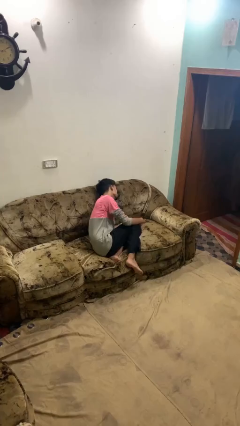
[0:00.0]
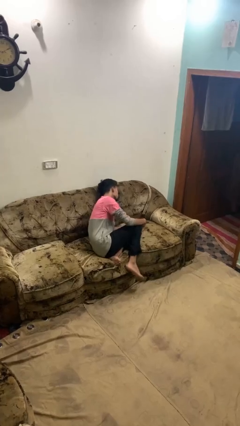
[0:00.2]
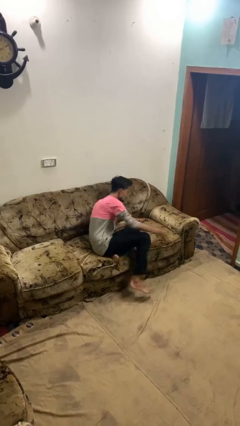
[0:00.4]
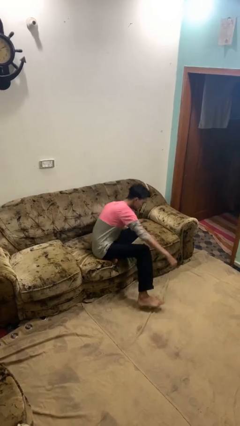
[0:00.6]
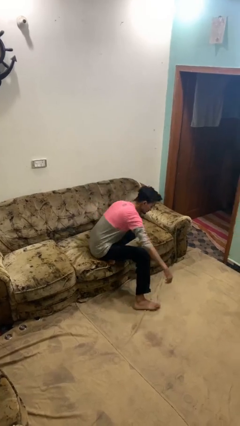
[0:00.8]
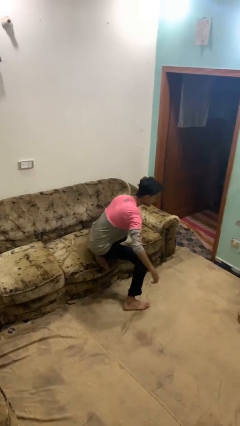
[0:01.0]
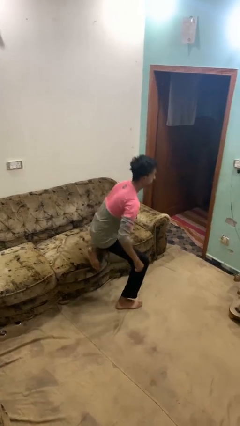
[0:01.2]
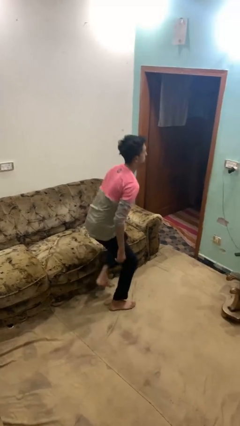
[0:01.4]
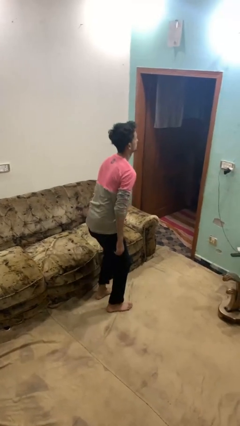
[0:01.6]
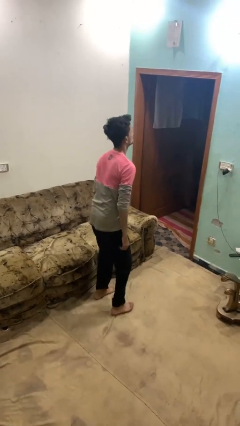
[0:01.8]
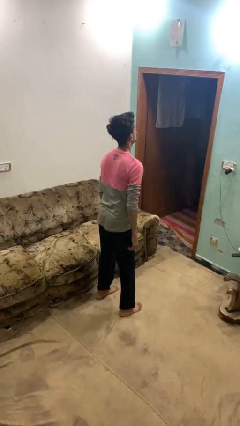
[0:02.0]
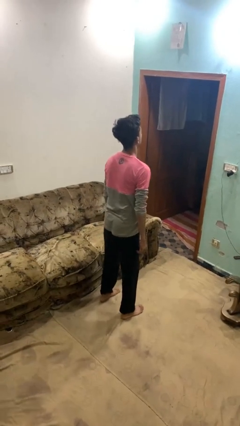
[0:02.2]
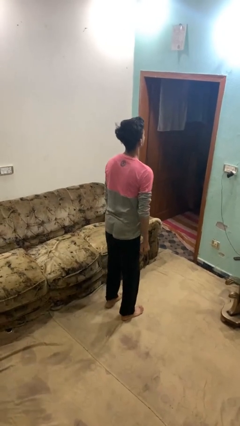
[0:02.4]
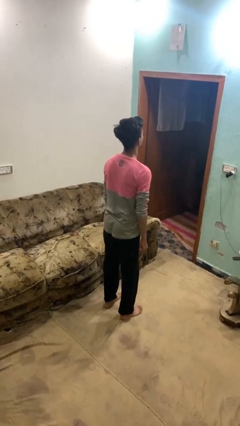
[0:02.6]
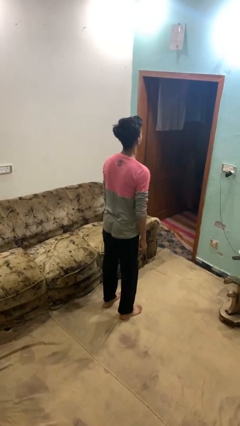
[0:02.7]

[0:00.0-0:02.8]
person stands up

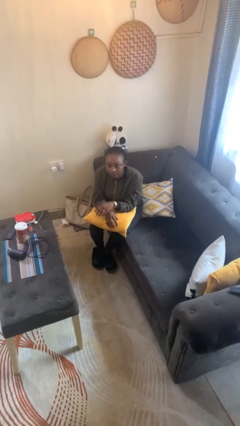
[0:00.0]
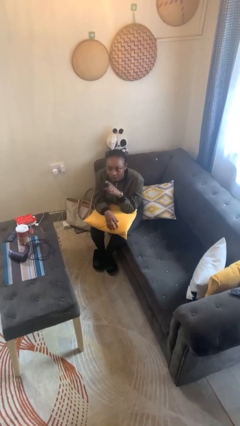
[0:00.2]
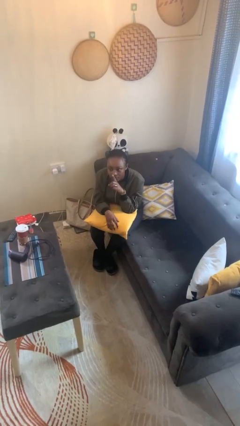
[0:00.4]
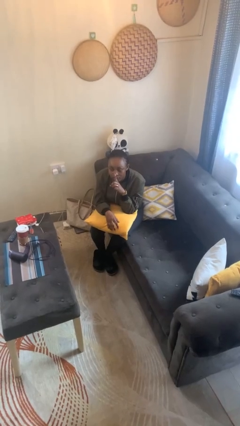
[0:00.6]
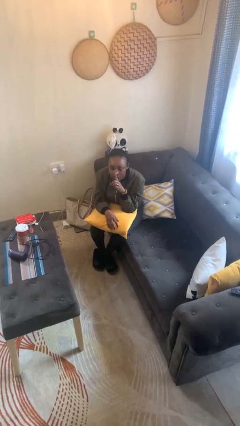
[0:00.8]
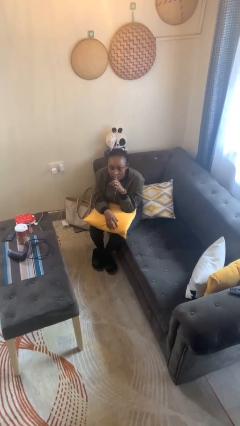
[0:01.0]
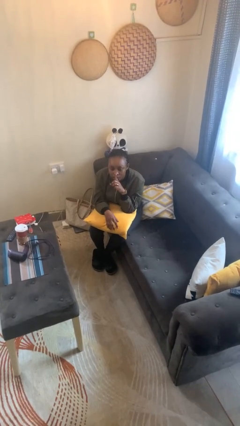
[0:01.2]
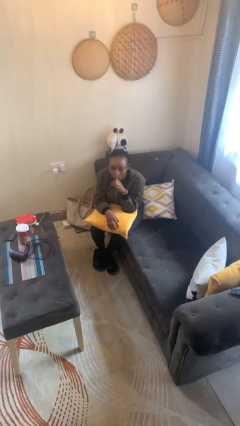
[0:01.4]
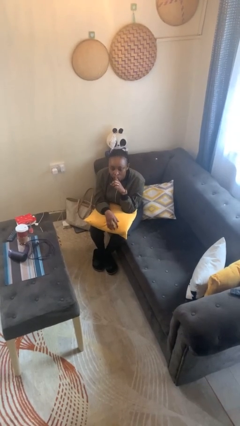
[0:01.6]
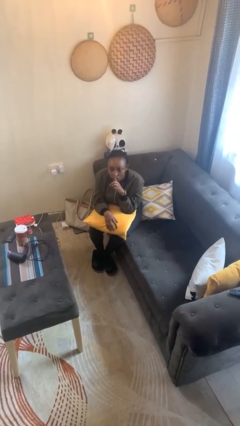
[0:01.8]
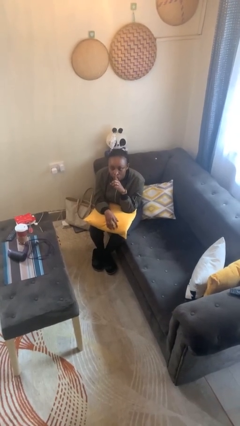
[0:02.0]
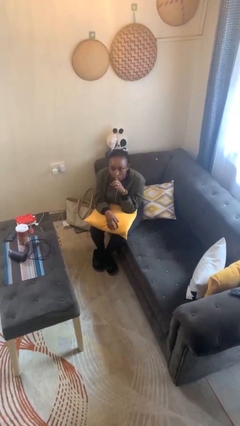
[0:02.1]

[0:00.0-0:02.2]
person gestures be quiet

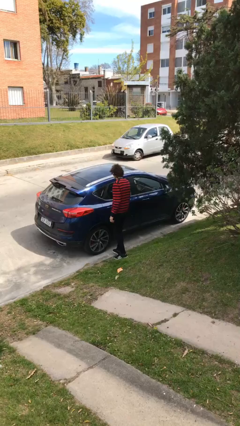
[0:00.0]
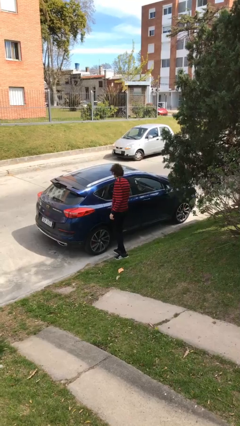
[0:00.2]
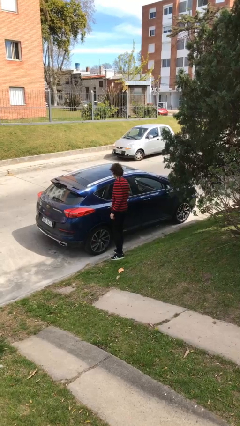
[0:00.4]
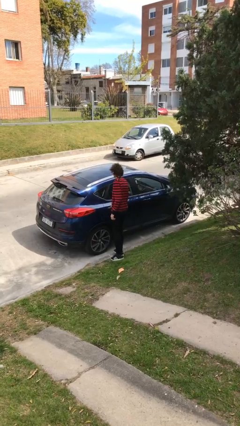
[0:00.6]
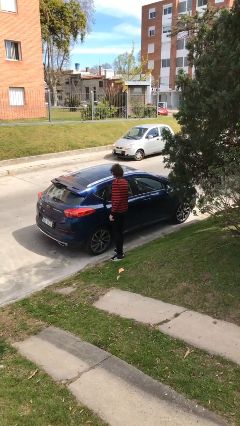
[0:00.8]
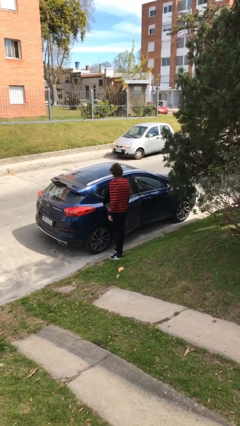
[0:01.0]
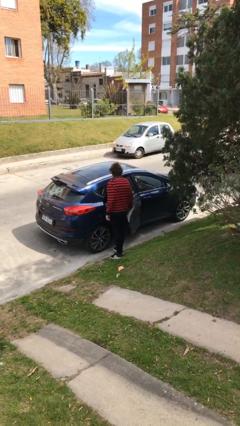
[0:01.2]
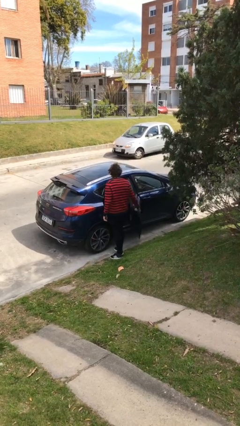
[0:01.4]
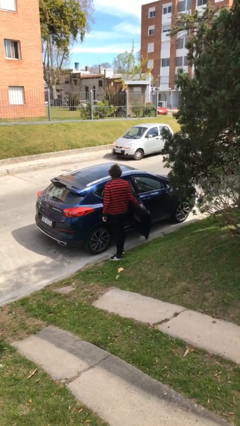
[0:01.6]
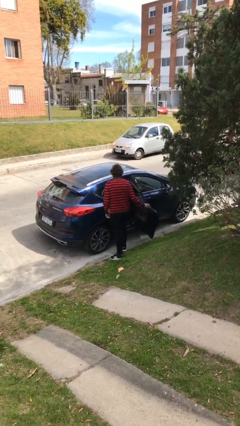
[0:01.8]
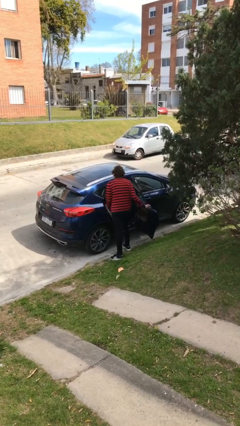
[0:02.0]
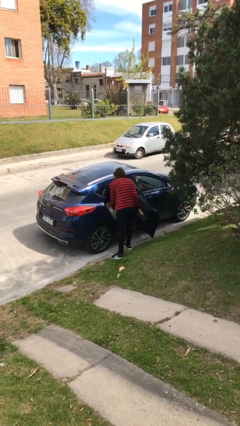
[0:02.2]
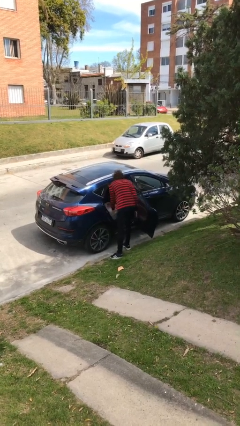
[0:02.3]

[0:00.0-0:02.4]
person opens car door

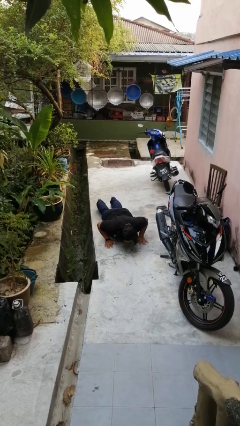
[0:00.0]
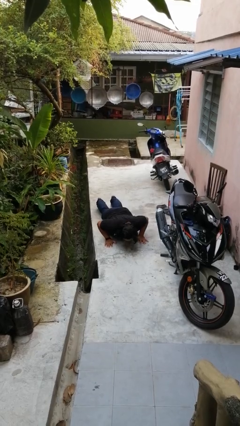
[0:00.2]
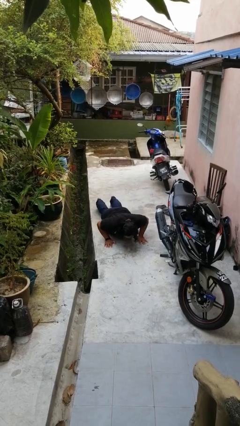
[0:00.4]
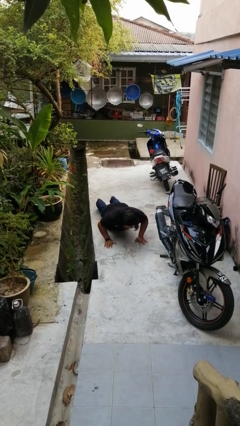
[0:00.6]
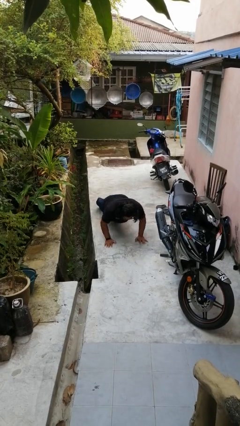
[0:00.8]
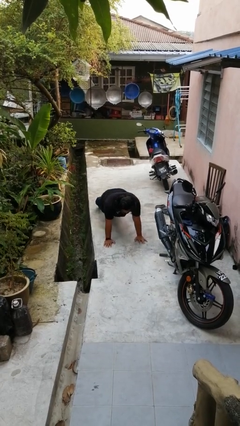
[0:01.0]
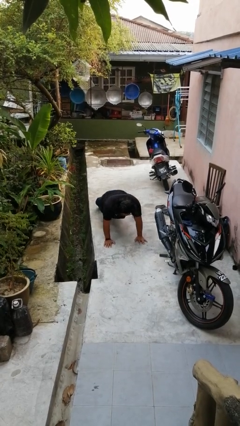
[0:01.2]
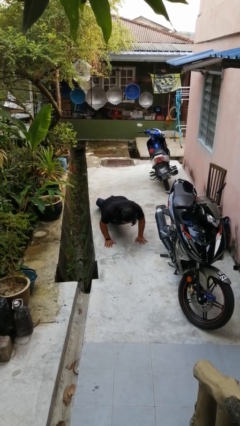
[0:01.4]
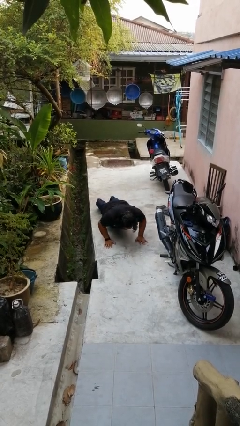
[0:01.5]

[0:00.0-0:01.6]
person exercises with pushup

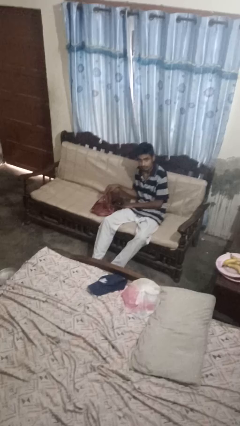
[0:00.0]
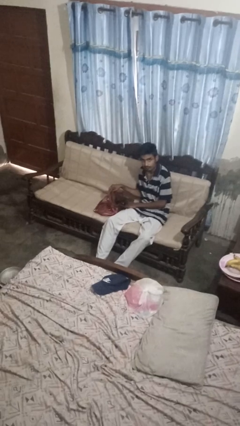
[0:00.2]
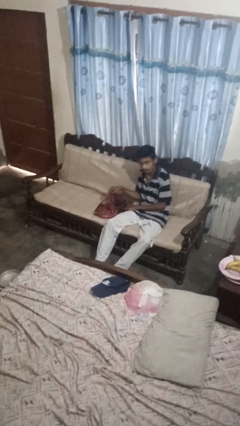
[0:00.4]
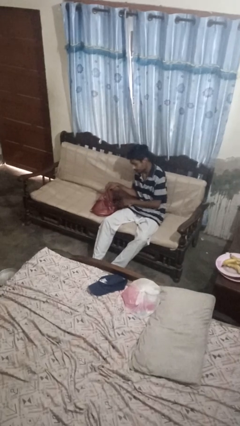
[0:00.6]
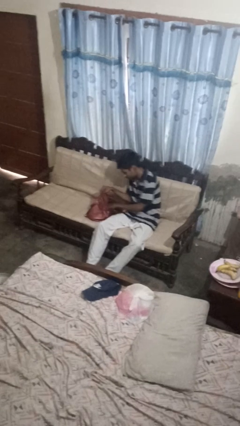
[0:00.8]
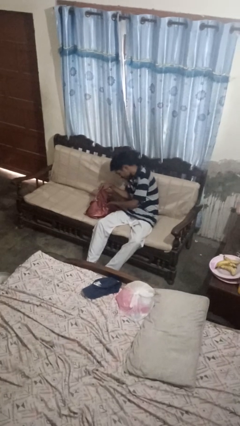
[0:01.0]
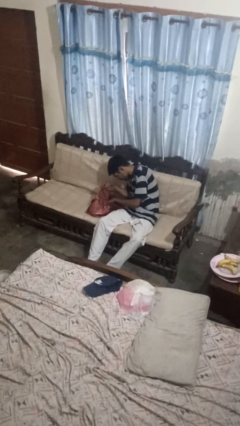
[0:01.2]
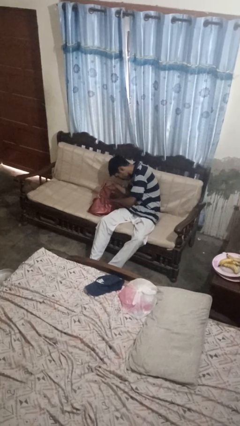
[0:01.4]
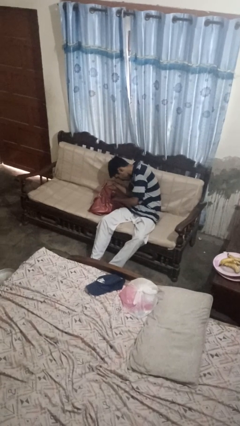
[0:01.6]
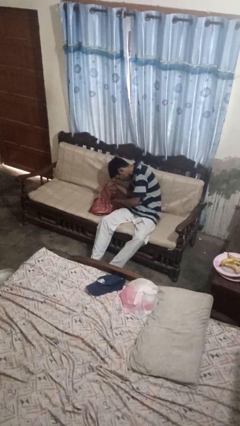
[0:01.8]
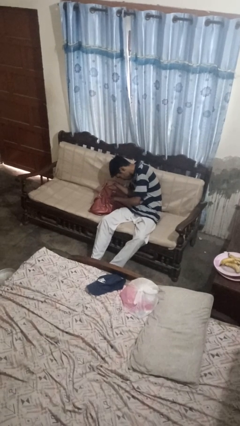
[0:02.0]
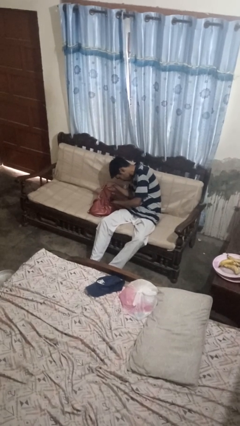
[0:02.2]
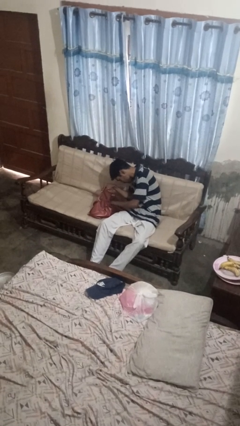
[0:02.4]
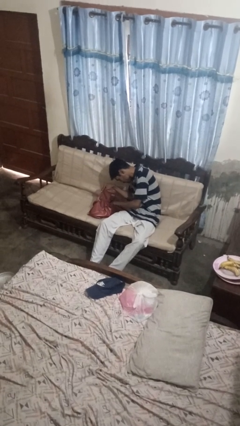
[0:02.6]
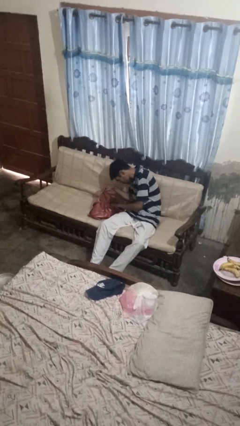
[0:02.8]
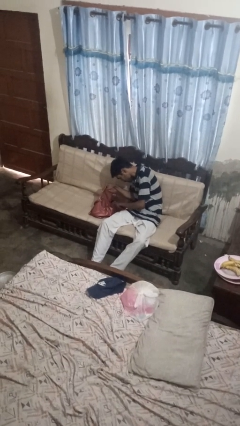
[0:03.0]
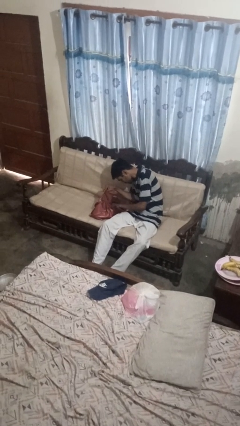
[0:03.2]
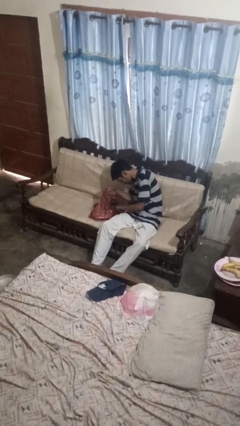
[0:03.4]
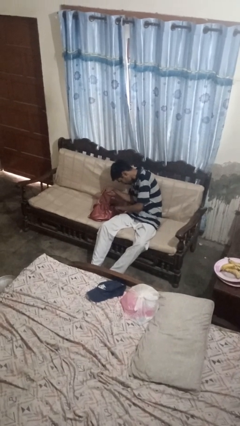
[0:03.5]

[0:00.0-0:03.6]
person searches in purse

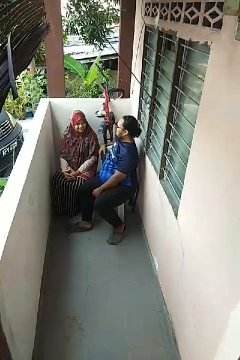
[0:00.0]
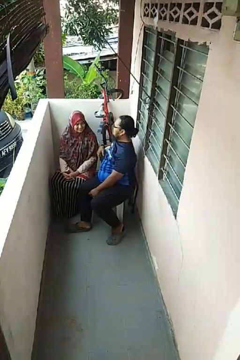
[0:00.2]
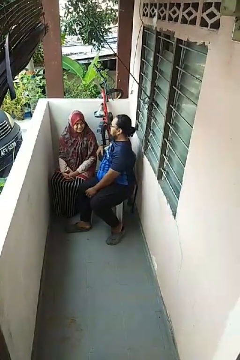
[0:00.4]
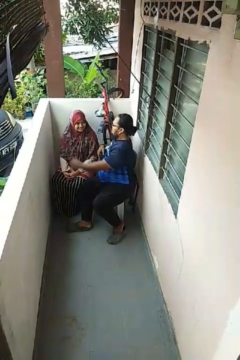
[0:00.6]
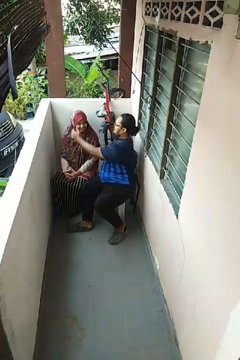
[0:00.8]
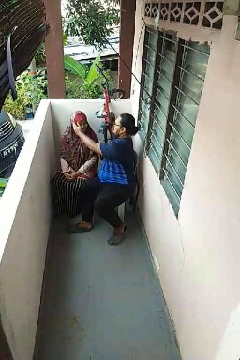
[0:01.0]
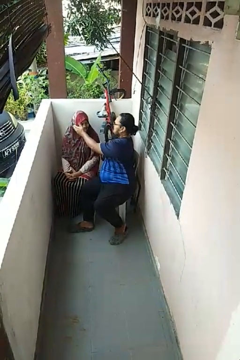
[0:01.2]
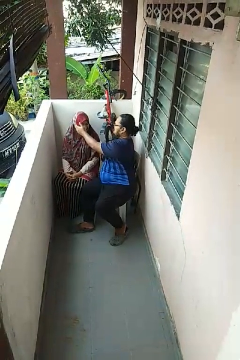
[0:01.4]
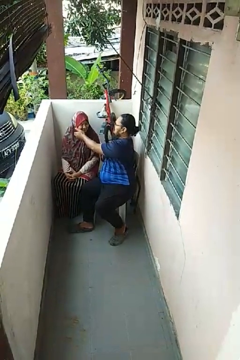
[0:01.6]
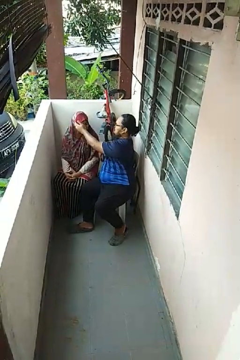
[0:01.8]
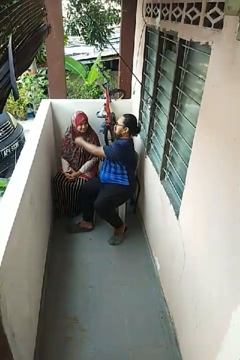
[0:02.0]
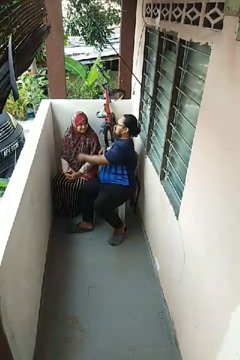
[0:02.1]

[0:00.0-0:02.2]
person touches face of person

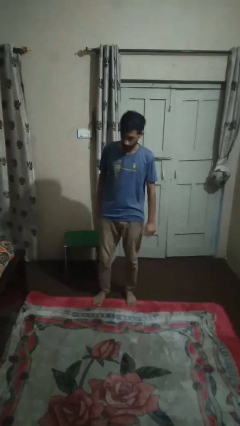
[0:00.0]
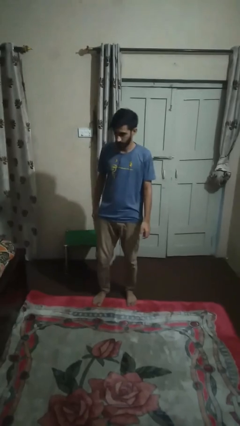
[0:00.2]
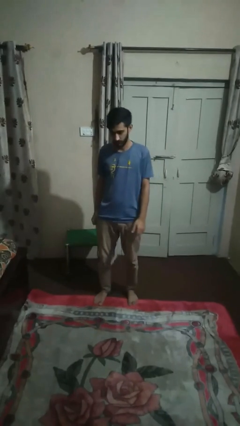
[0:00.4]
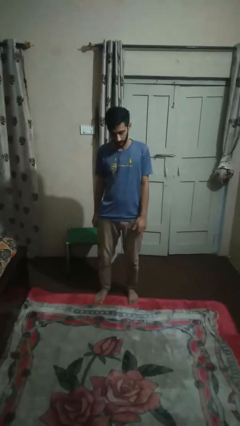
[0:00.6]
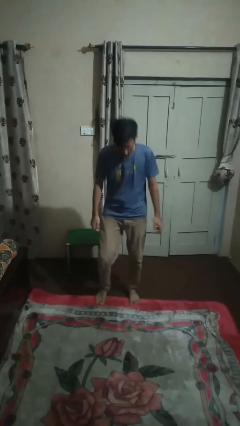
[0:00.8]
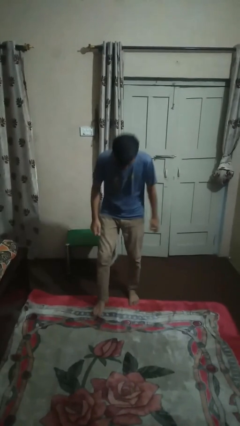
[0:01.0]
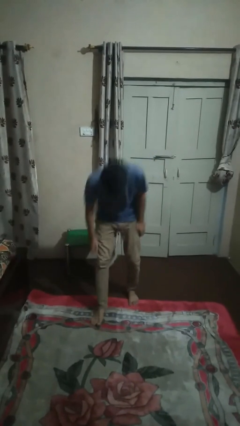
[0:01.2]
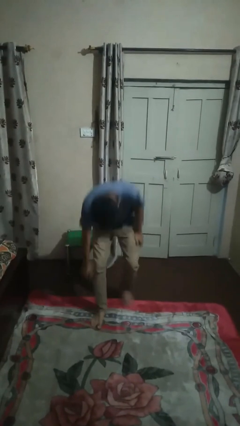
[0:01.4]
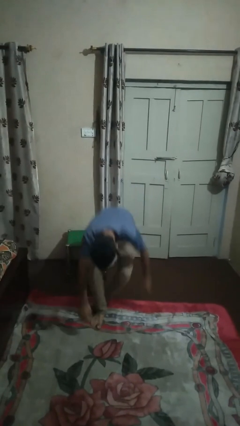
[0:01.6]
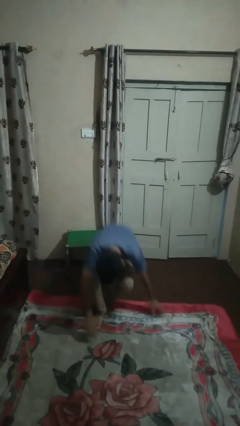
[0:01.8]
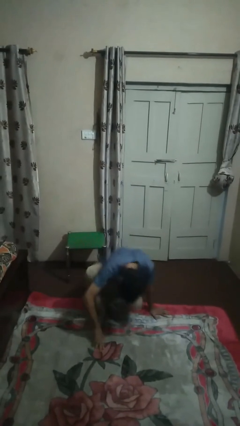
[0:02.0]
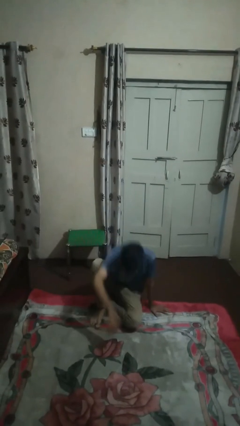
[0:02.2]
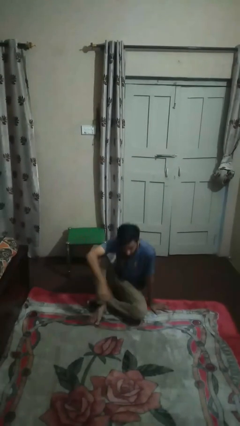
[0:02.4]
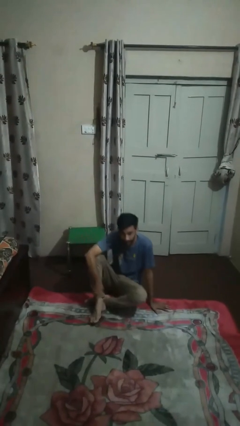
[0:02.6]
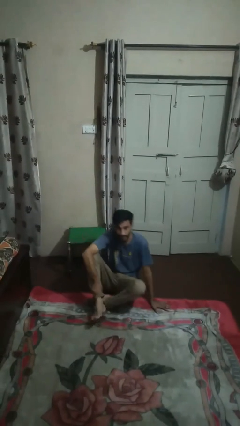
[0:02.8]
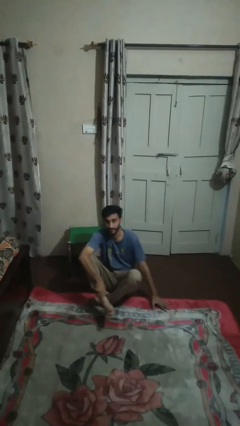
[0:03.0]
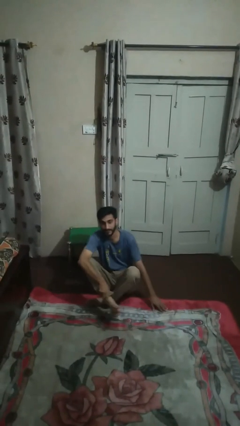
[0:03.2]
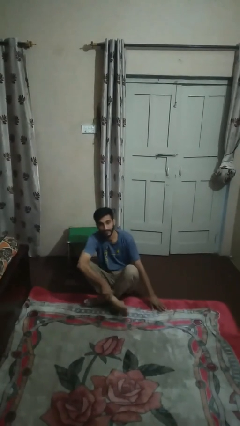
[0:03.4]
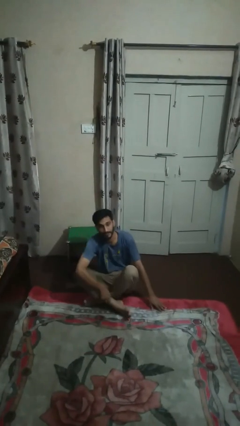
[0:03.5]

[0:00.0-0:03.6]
person sits crisscross
